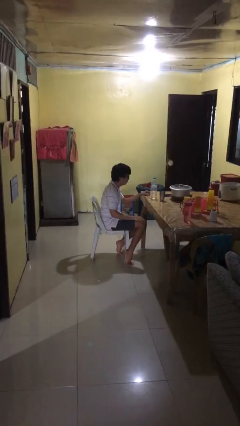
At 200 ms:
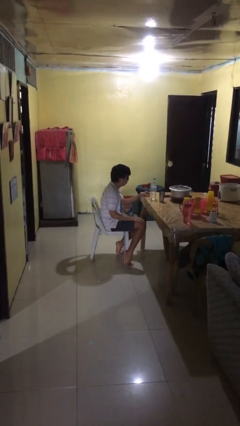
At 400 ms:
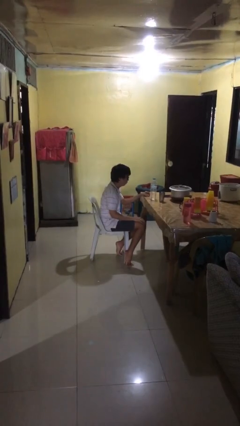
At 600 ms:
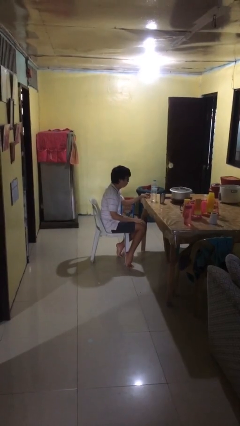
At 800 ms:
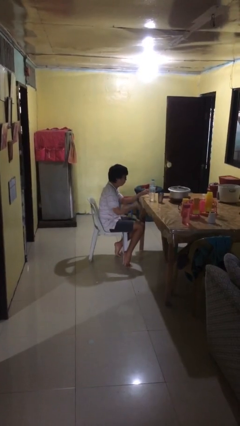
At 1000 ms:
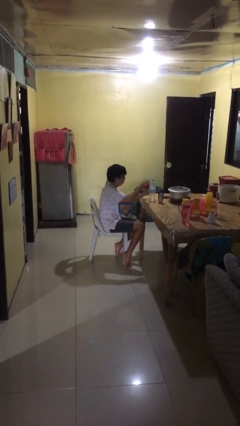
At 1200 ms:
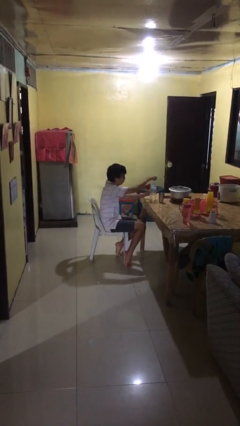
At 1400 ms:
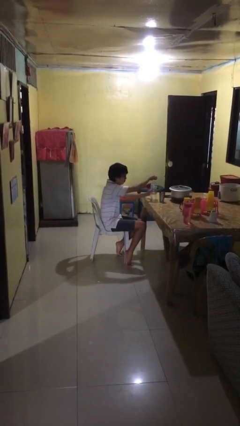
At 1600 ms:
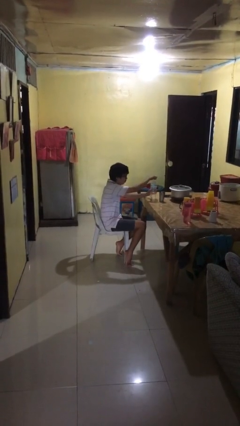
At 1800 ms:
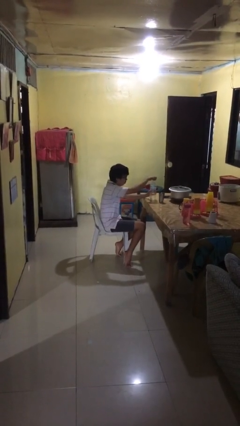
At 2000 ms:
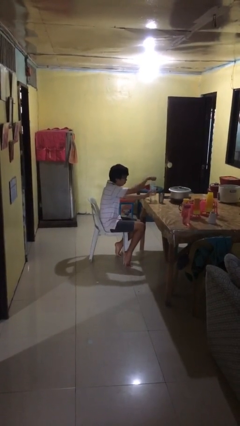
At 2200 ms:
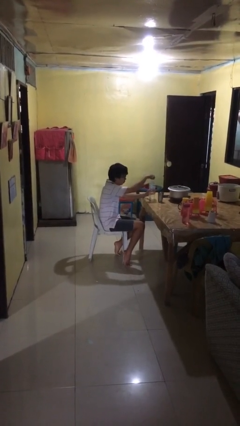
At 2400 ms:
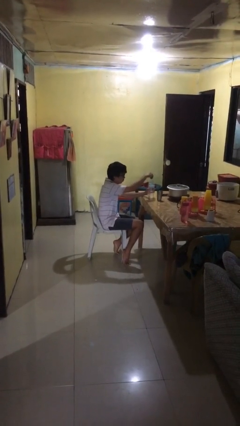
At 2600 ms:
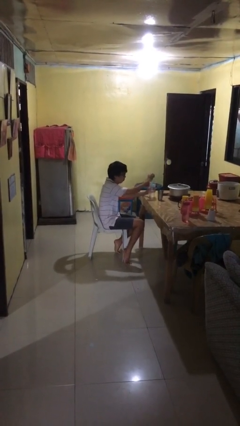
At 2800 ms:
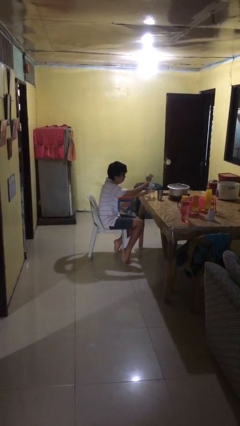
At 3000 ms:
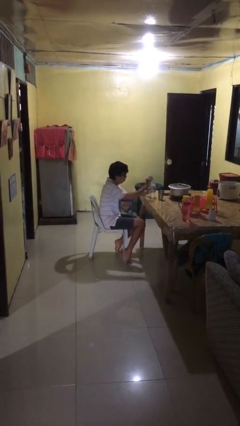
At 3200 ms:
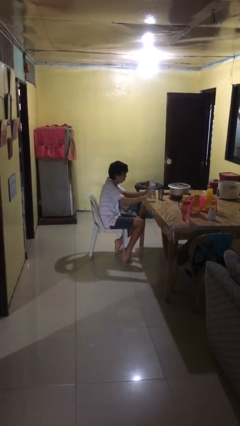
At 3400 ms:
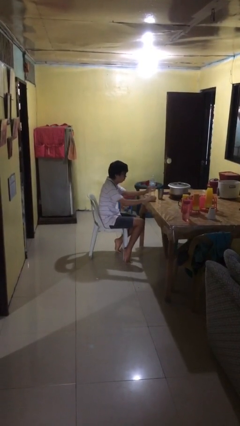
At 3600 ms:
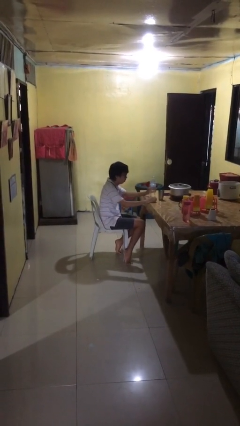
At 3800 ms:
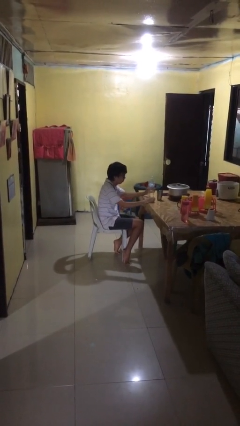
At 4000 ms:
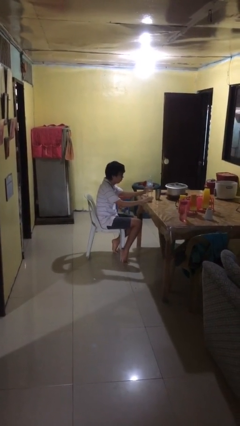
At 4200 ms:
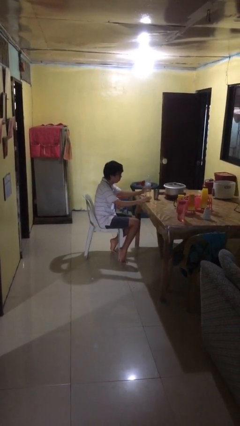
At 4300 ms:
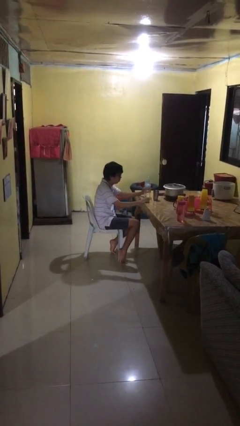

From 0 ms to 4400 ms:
person unscrews lid from bottle

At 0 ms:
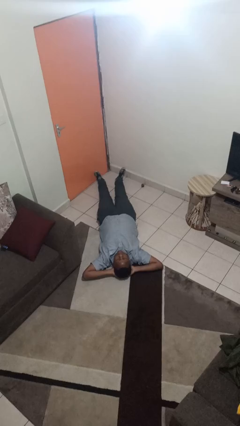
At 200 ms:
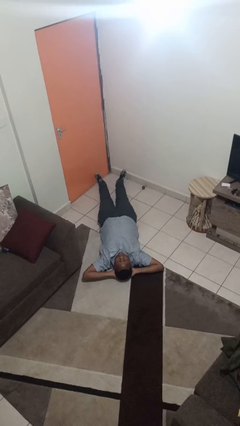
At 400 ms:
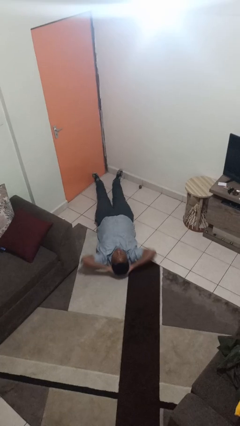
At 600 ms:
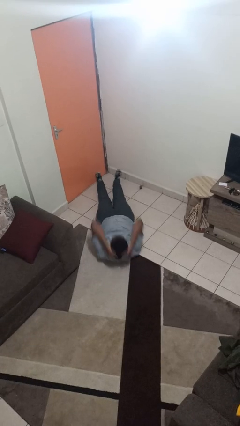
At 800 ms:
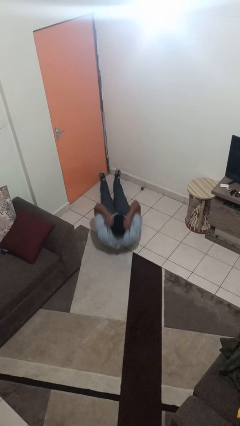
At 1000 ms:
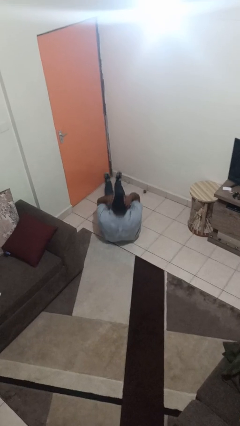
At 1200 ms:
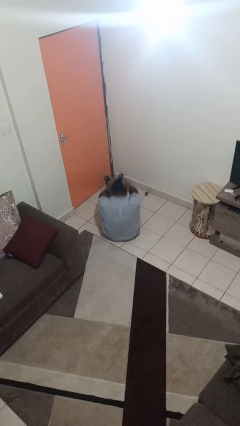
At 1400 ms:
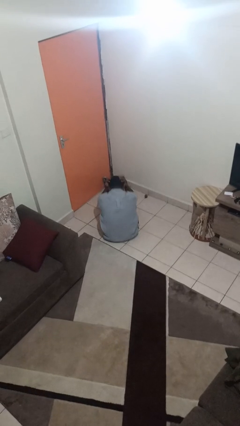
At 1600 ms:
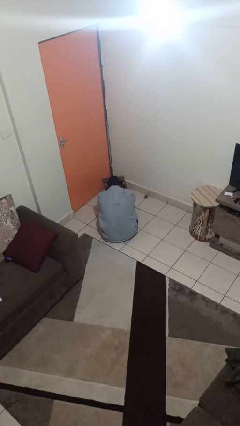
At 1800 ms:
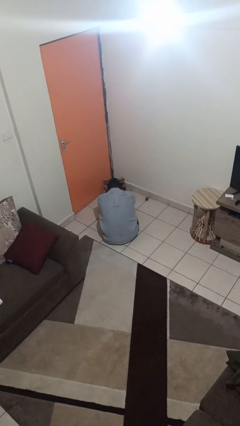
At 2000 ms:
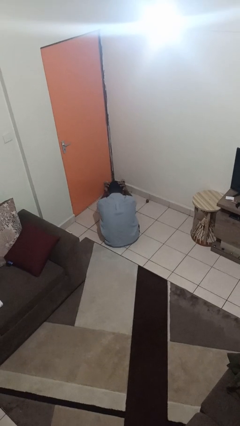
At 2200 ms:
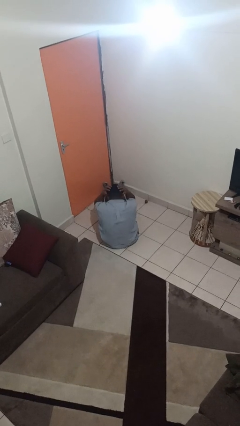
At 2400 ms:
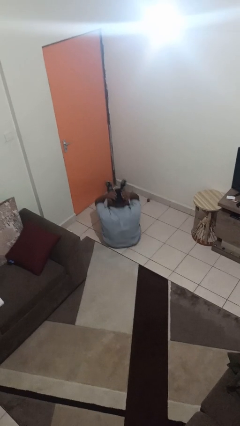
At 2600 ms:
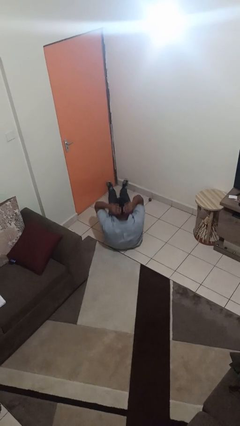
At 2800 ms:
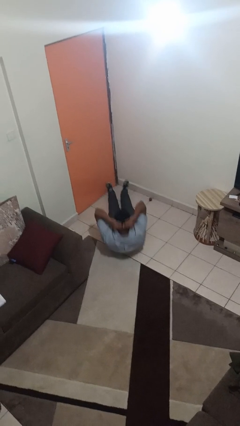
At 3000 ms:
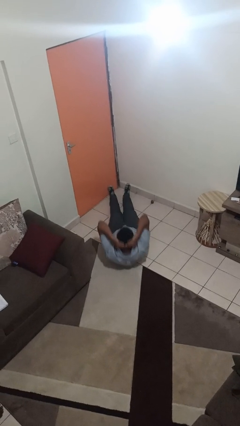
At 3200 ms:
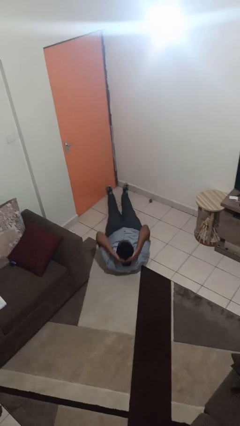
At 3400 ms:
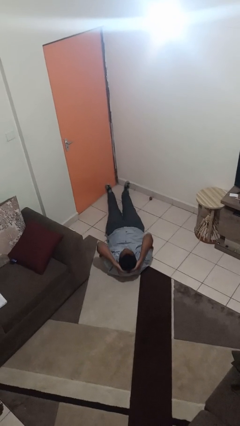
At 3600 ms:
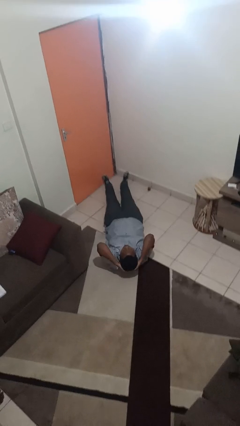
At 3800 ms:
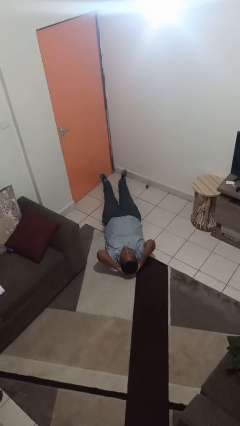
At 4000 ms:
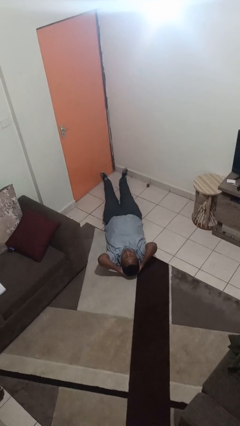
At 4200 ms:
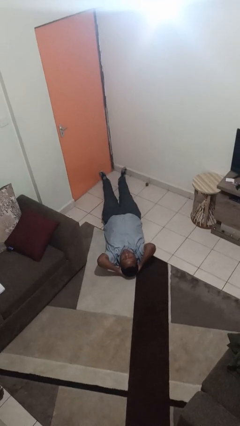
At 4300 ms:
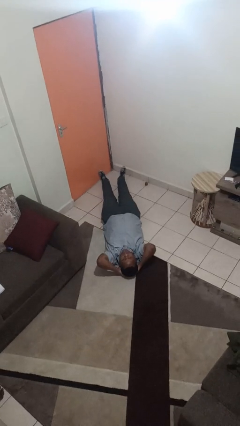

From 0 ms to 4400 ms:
person exercises with pushup

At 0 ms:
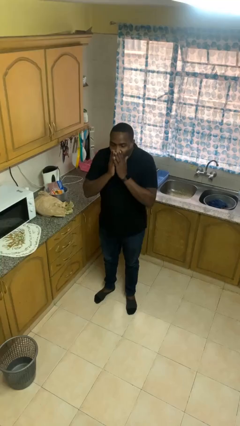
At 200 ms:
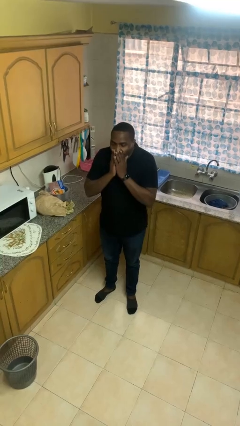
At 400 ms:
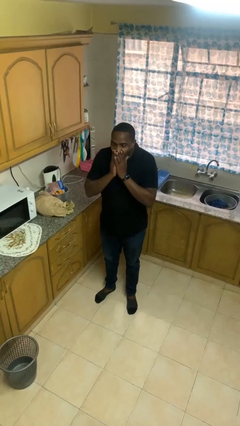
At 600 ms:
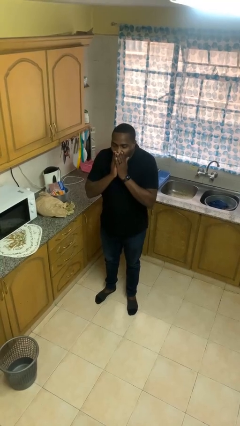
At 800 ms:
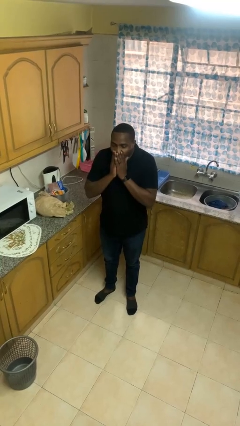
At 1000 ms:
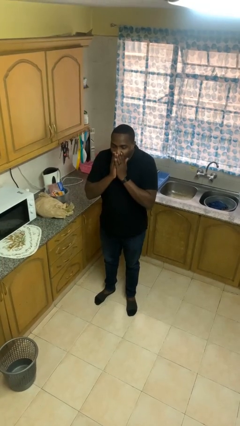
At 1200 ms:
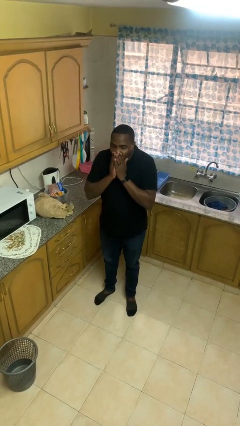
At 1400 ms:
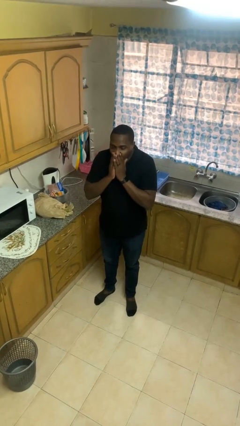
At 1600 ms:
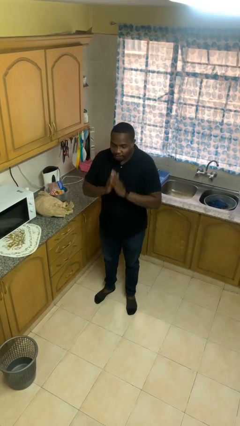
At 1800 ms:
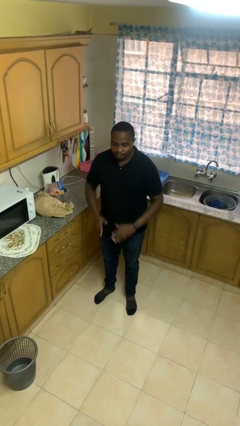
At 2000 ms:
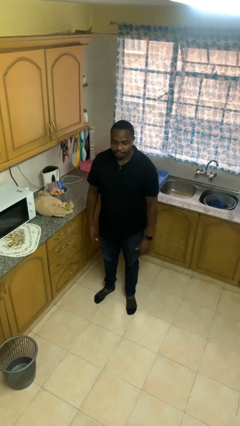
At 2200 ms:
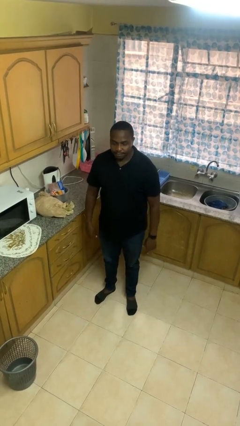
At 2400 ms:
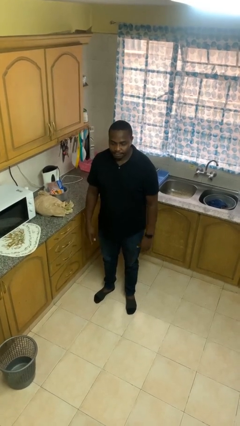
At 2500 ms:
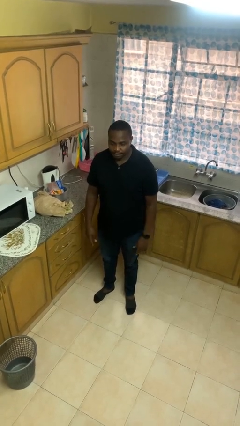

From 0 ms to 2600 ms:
person yawns

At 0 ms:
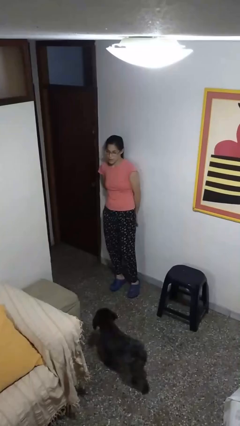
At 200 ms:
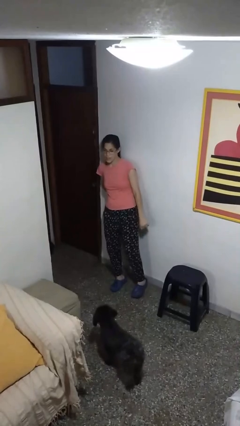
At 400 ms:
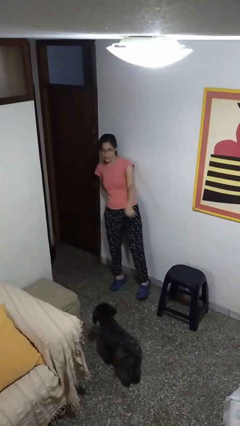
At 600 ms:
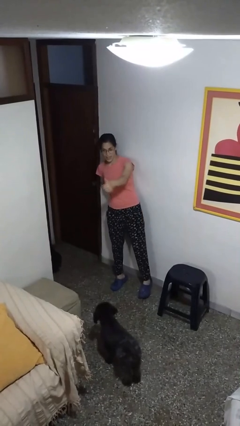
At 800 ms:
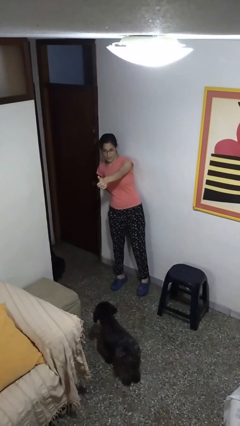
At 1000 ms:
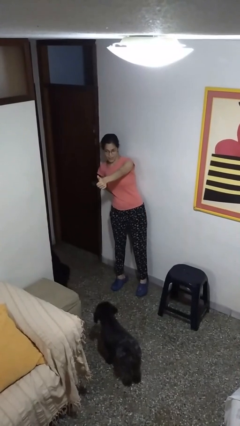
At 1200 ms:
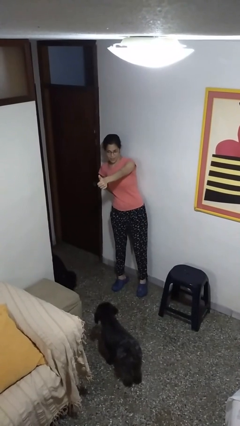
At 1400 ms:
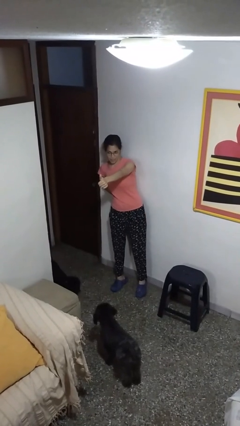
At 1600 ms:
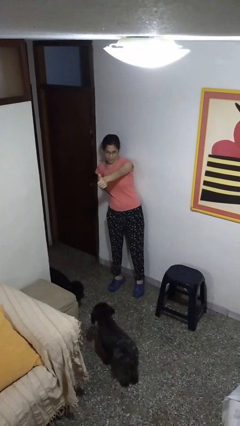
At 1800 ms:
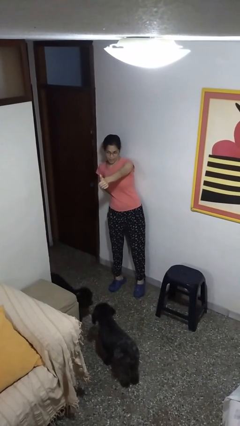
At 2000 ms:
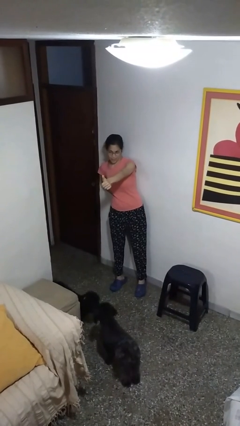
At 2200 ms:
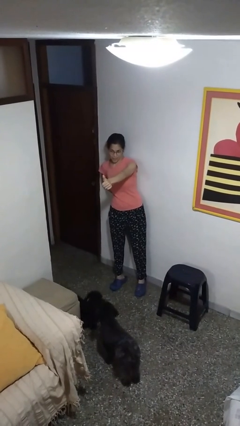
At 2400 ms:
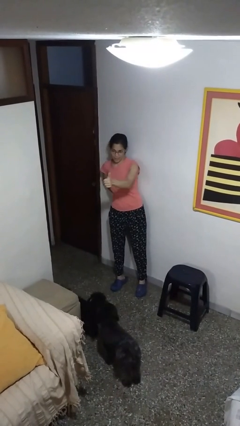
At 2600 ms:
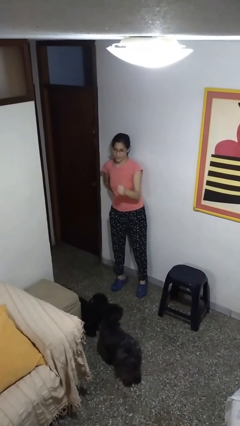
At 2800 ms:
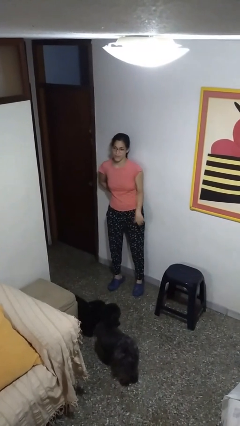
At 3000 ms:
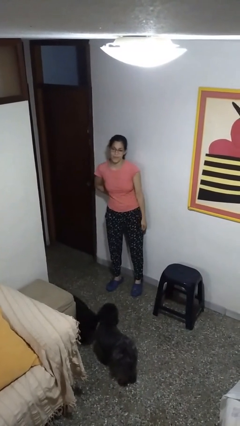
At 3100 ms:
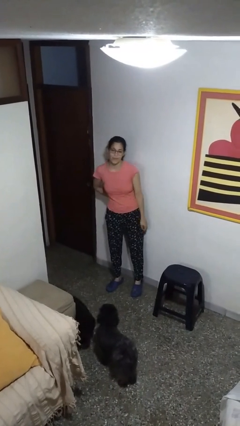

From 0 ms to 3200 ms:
person gestures thumbs up

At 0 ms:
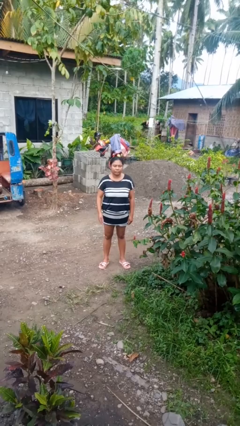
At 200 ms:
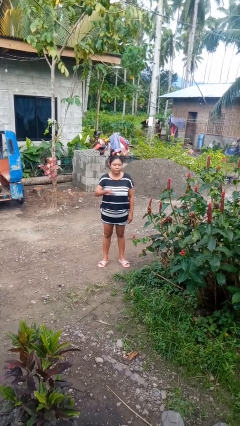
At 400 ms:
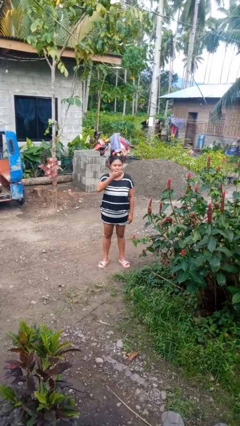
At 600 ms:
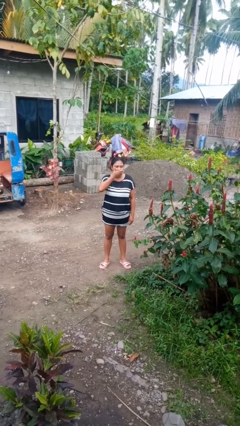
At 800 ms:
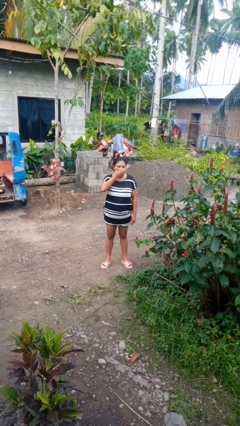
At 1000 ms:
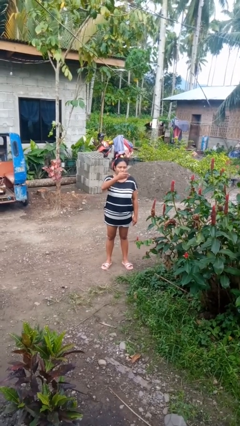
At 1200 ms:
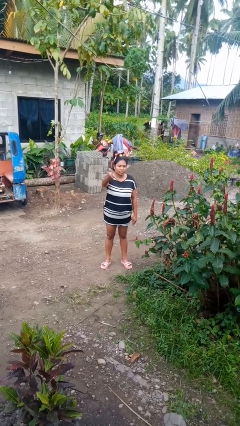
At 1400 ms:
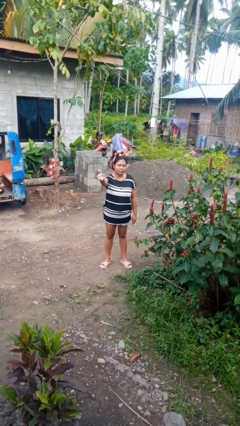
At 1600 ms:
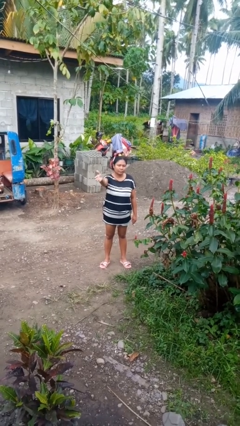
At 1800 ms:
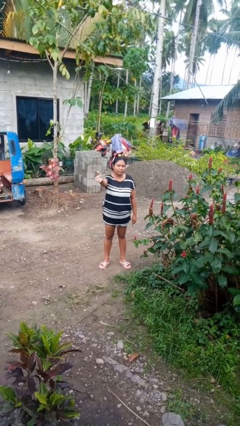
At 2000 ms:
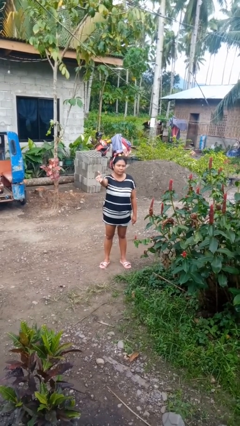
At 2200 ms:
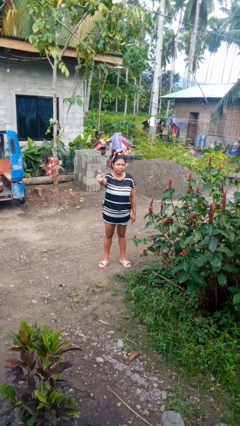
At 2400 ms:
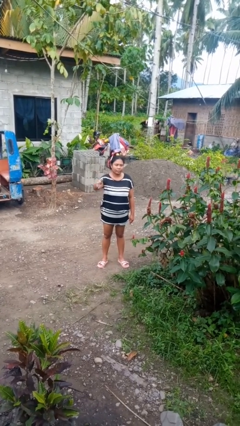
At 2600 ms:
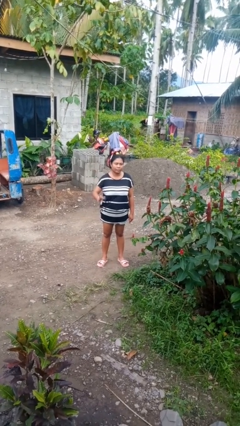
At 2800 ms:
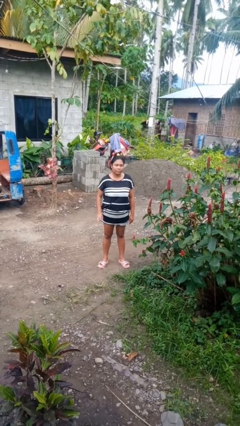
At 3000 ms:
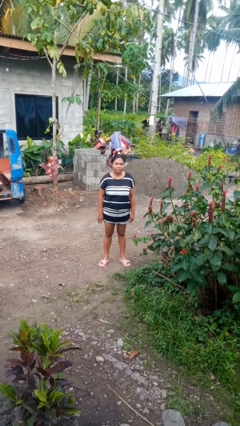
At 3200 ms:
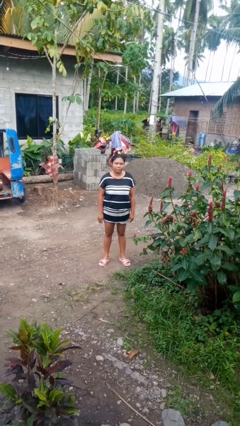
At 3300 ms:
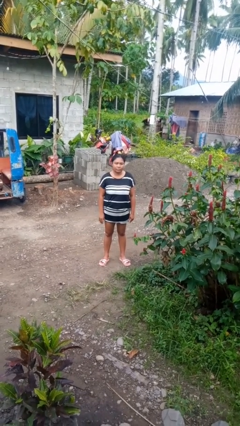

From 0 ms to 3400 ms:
person gestures blow kiss
